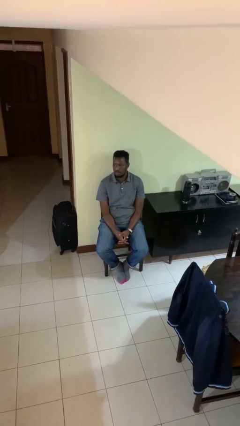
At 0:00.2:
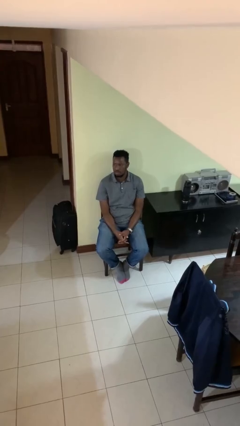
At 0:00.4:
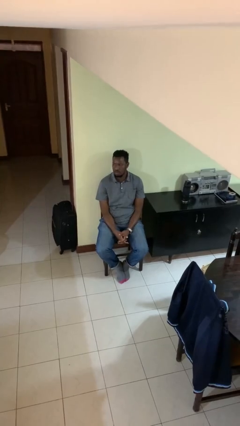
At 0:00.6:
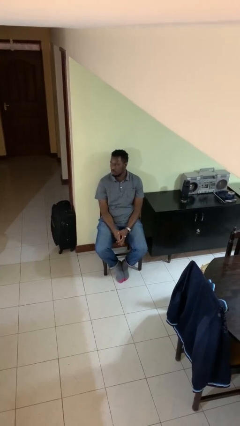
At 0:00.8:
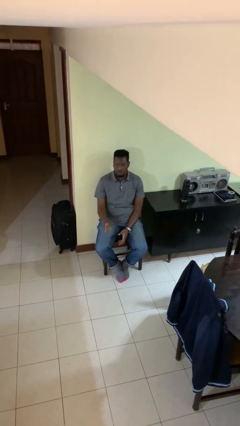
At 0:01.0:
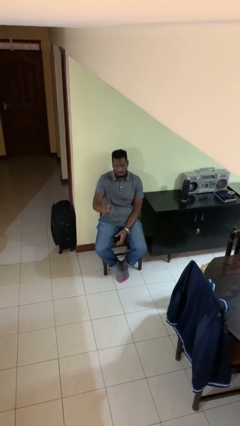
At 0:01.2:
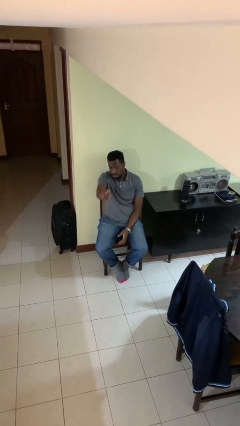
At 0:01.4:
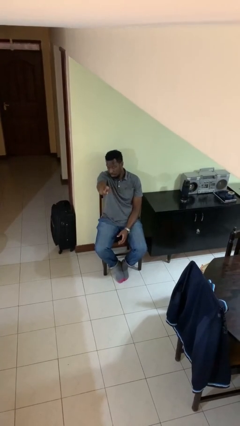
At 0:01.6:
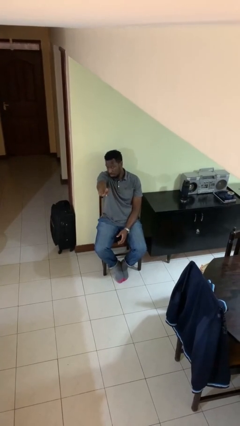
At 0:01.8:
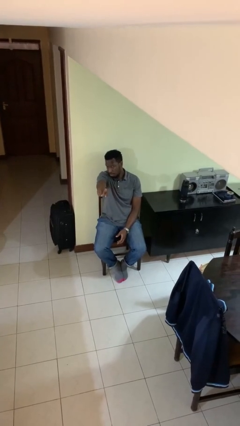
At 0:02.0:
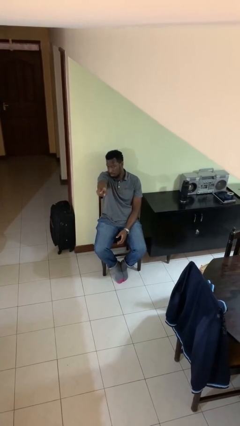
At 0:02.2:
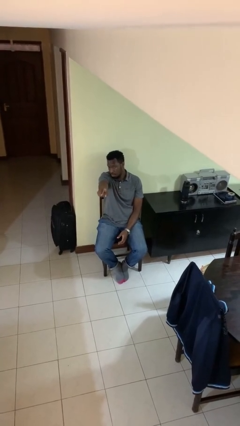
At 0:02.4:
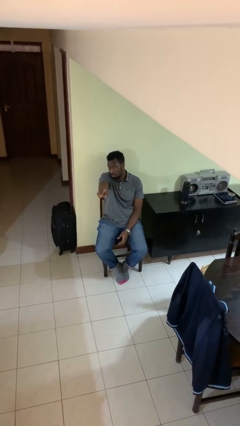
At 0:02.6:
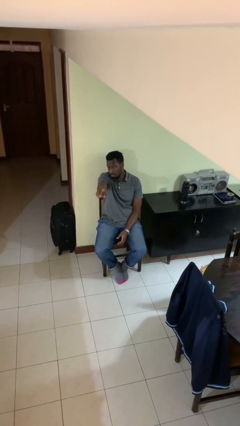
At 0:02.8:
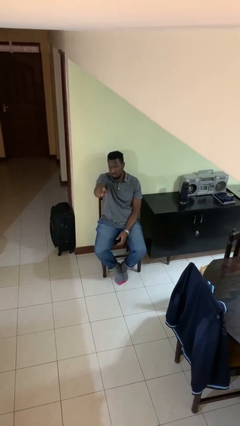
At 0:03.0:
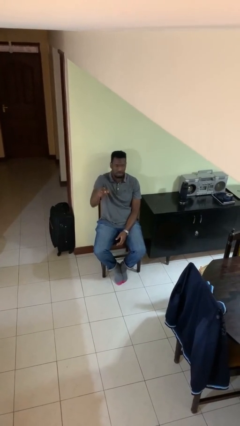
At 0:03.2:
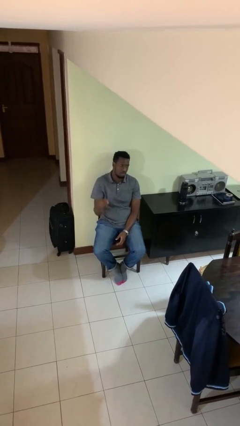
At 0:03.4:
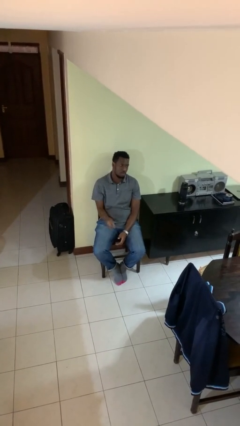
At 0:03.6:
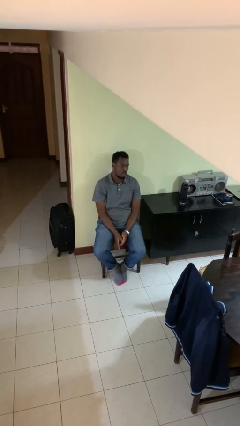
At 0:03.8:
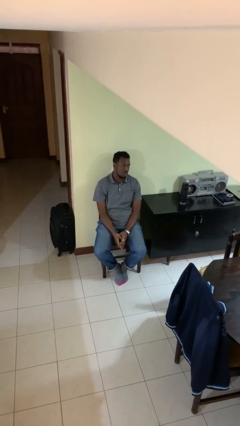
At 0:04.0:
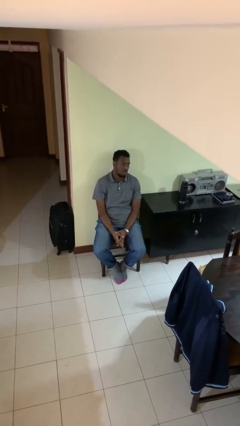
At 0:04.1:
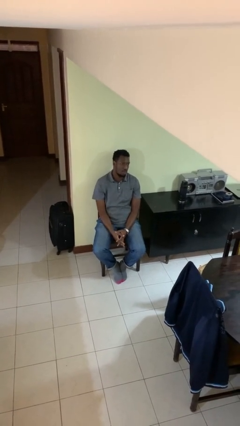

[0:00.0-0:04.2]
person points at person

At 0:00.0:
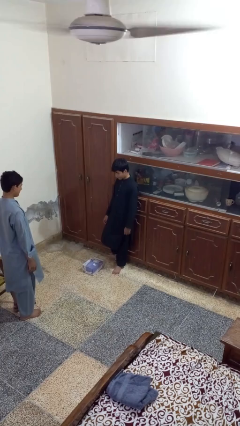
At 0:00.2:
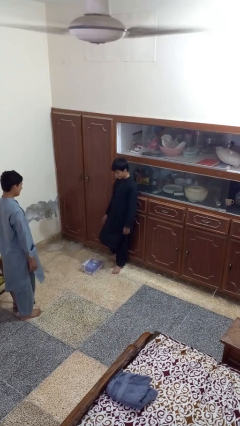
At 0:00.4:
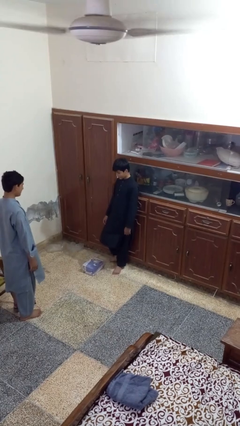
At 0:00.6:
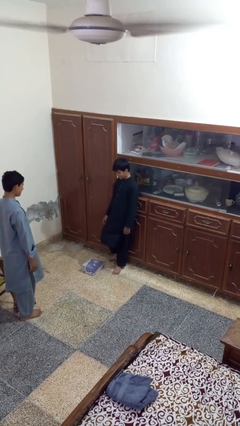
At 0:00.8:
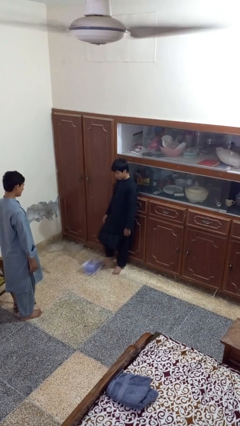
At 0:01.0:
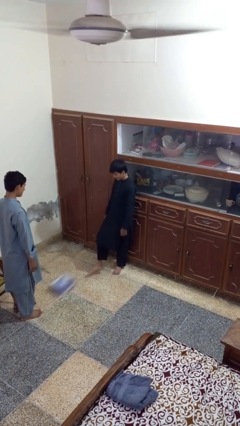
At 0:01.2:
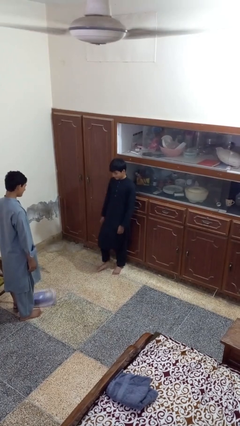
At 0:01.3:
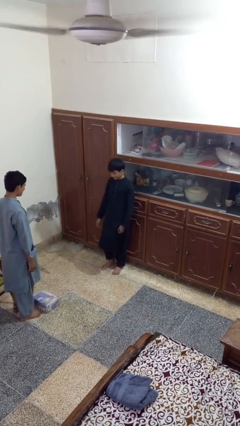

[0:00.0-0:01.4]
person kicks object to person

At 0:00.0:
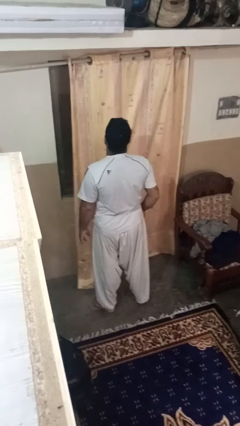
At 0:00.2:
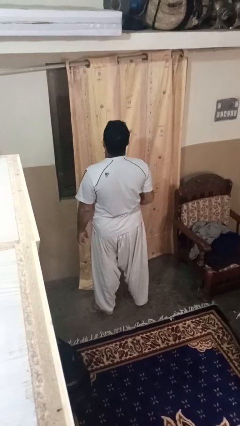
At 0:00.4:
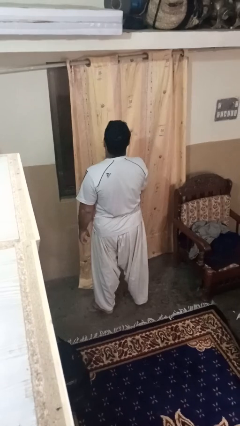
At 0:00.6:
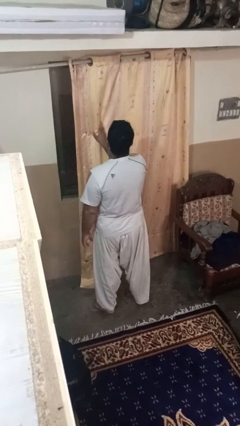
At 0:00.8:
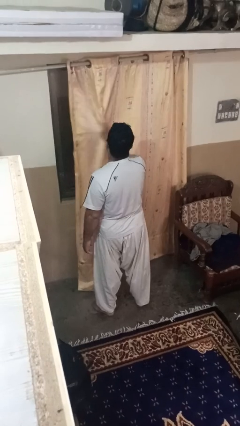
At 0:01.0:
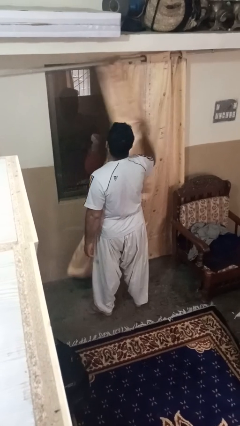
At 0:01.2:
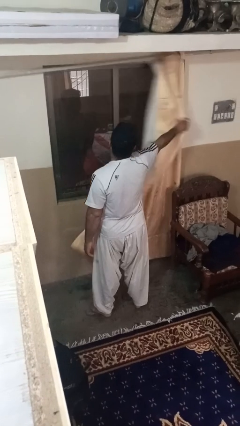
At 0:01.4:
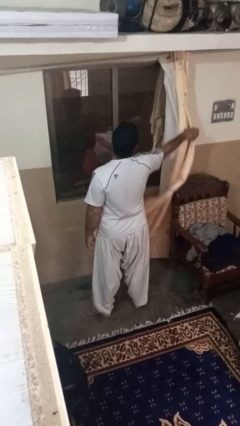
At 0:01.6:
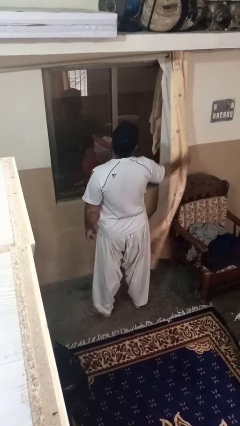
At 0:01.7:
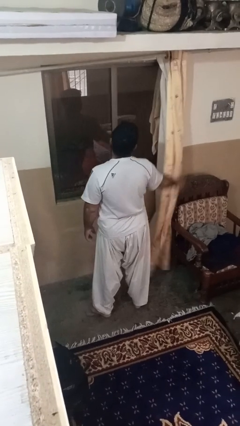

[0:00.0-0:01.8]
person opens curtains

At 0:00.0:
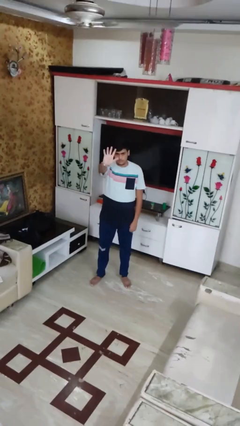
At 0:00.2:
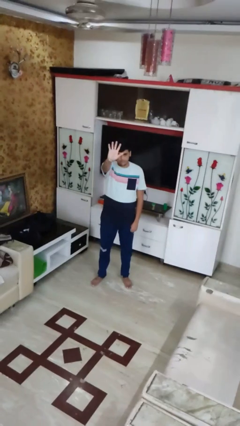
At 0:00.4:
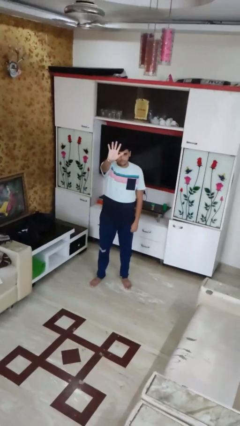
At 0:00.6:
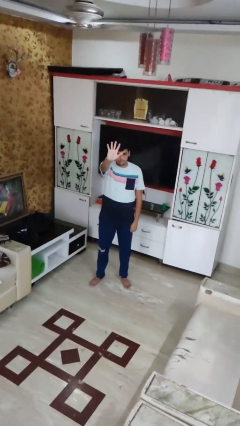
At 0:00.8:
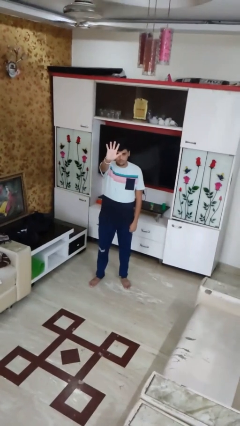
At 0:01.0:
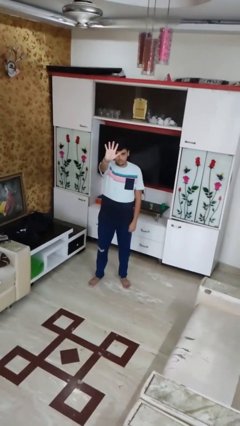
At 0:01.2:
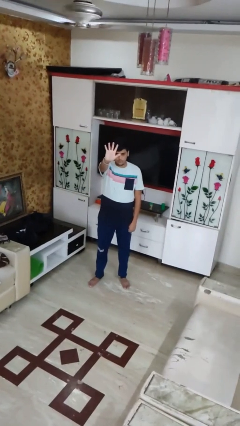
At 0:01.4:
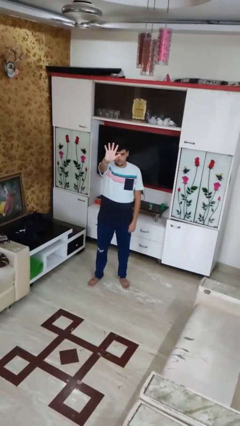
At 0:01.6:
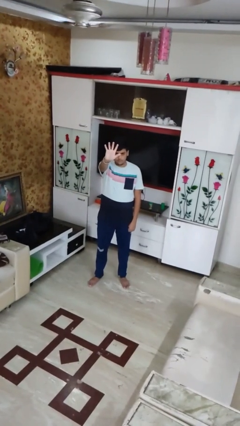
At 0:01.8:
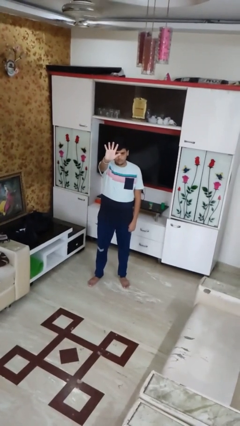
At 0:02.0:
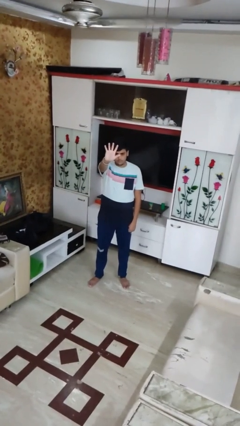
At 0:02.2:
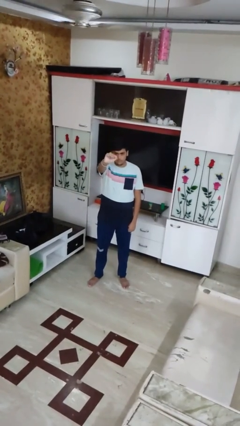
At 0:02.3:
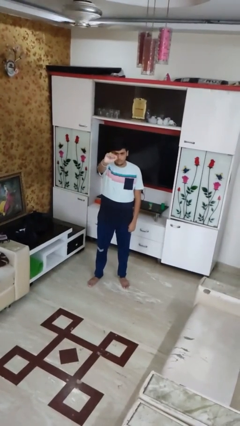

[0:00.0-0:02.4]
person gestures number five

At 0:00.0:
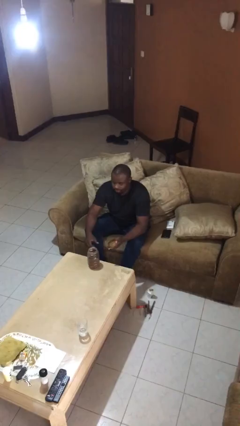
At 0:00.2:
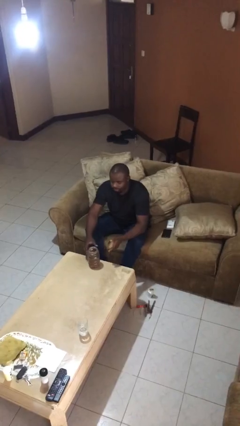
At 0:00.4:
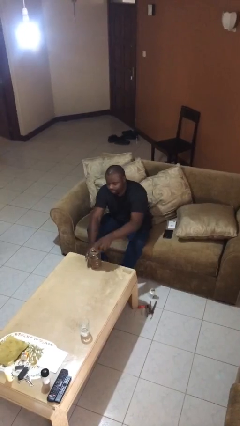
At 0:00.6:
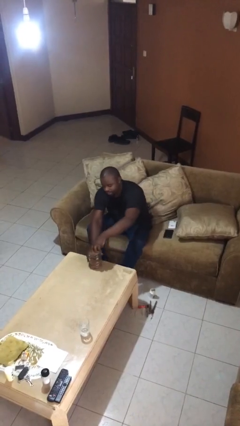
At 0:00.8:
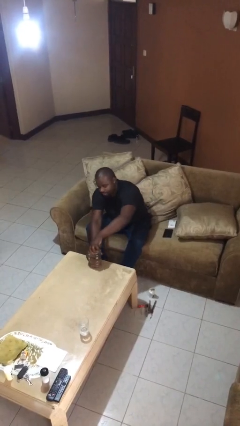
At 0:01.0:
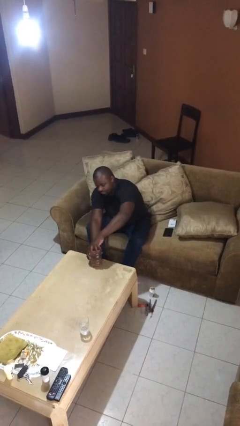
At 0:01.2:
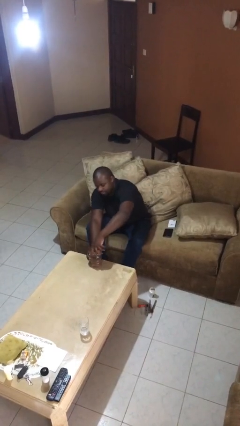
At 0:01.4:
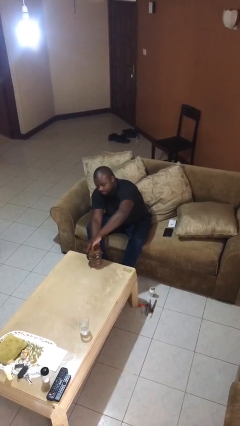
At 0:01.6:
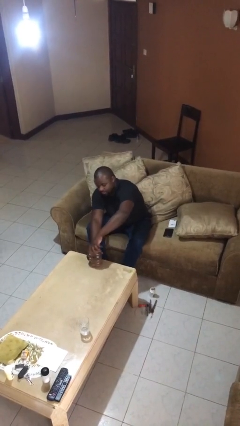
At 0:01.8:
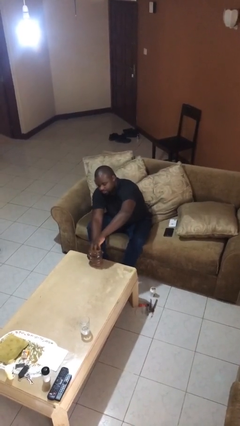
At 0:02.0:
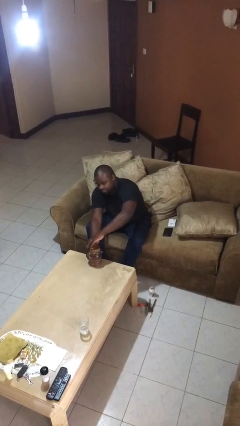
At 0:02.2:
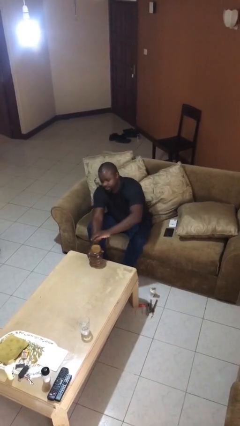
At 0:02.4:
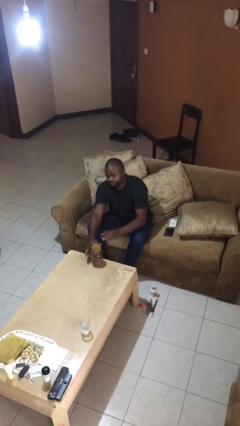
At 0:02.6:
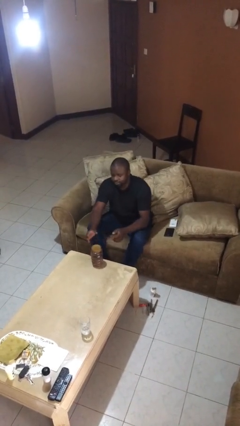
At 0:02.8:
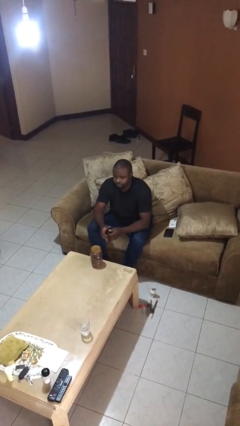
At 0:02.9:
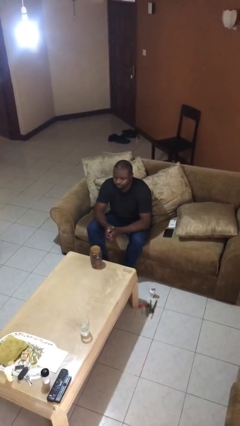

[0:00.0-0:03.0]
person closes jar

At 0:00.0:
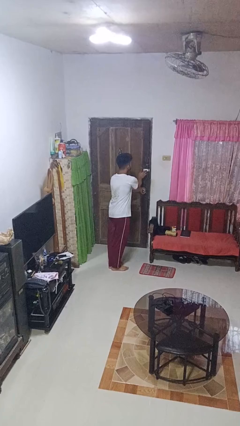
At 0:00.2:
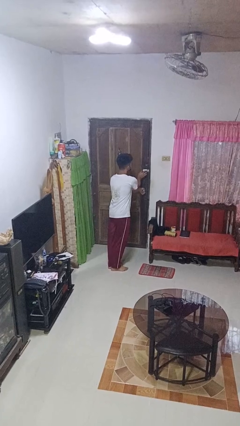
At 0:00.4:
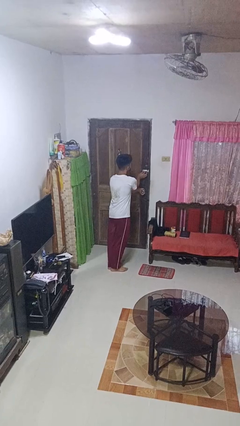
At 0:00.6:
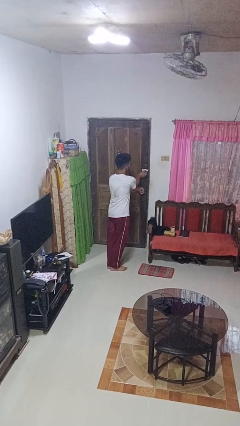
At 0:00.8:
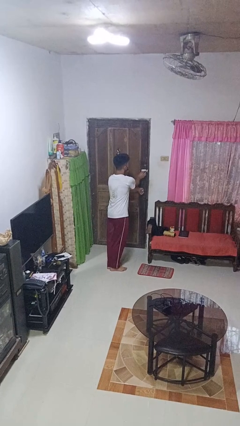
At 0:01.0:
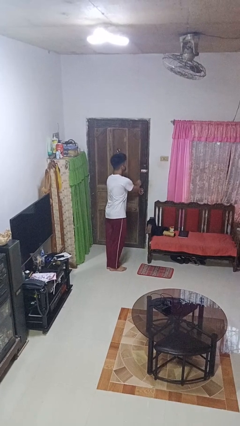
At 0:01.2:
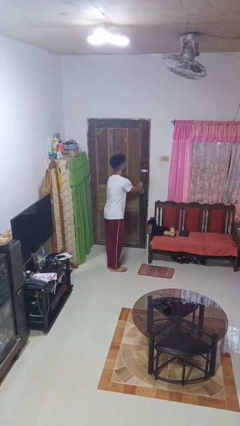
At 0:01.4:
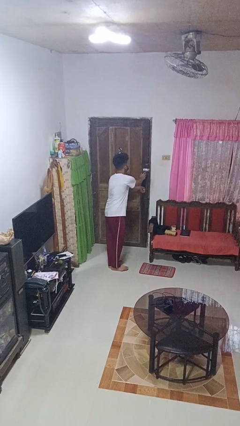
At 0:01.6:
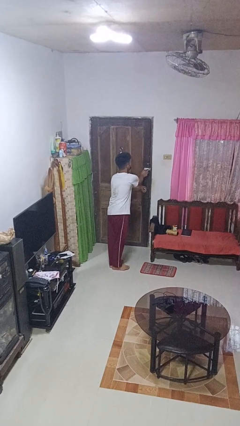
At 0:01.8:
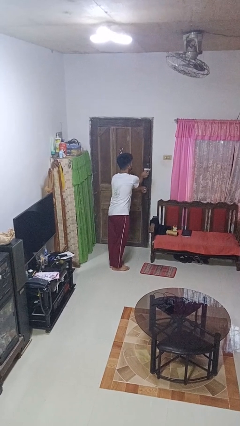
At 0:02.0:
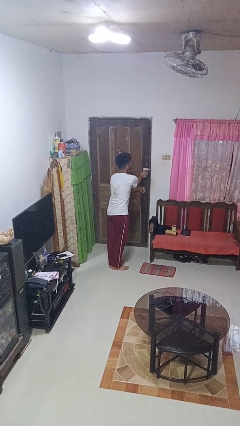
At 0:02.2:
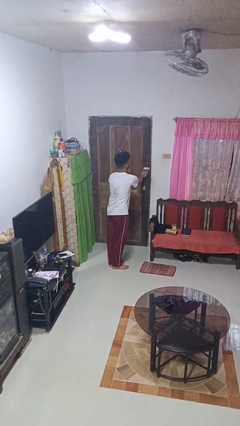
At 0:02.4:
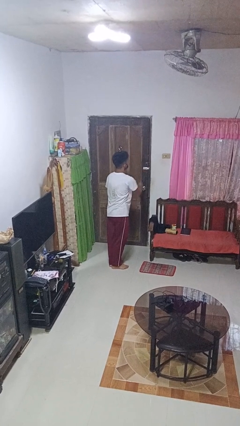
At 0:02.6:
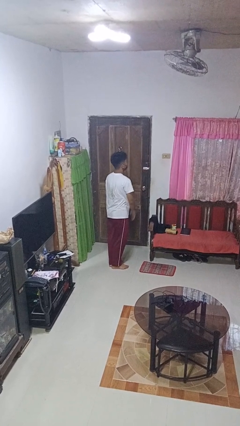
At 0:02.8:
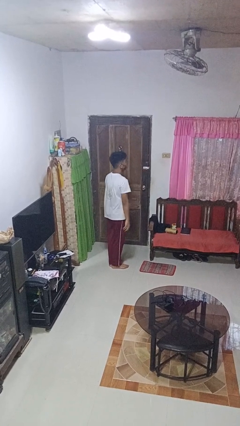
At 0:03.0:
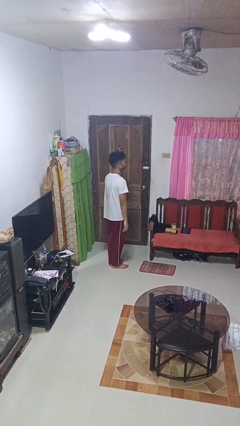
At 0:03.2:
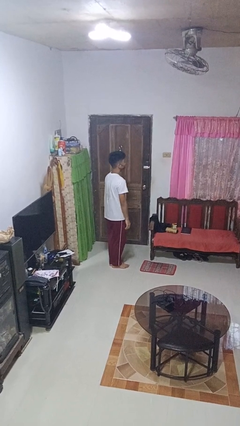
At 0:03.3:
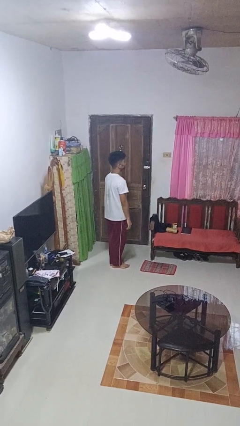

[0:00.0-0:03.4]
person locks door with keys

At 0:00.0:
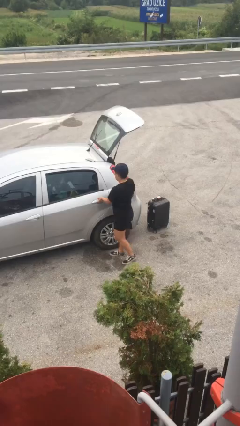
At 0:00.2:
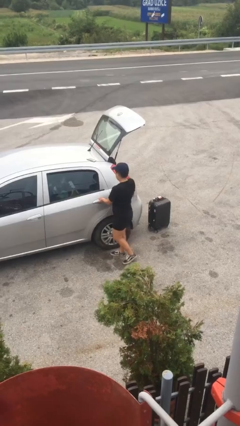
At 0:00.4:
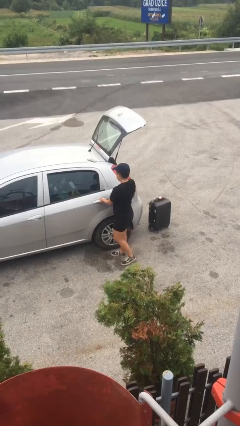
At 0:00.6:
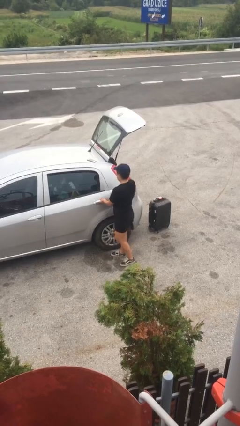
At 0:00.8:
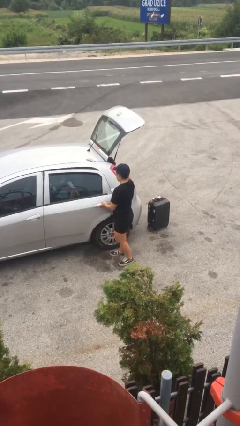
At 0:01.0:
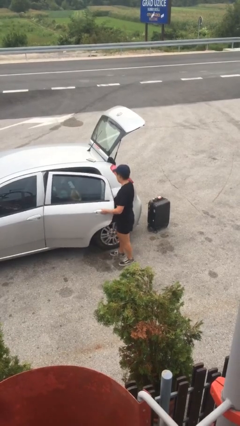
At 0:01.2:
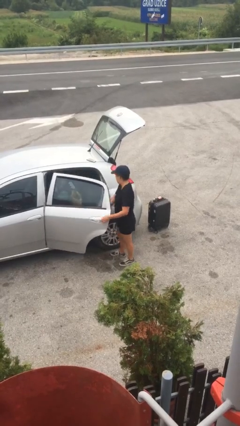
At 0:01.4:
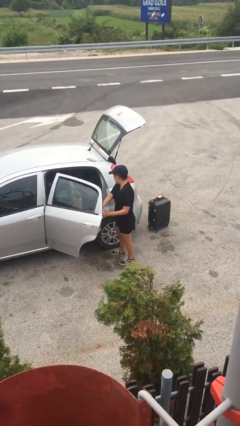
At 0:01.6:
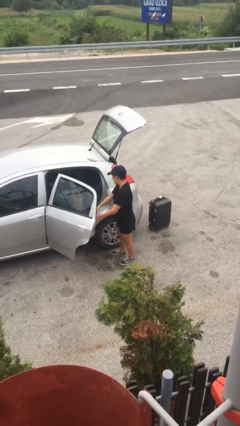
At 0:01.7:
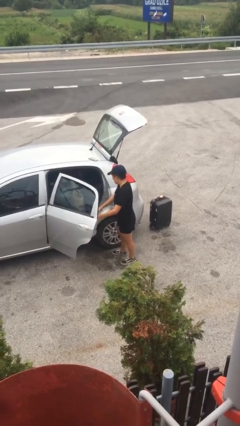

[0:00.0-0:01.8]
person opens car door
